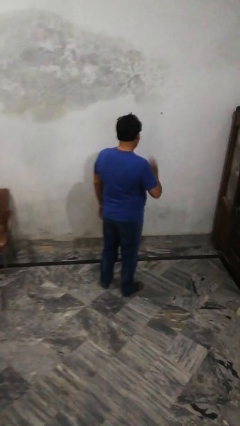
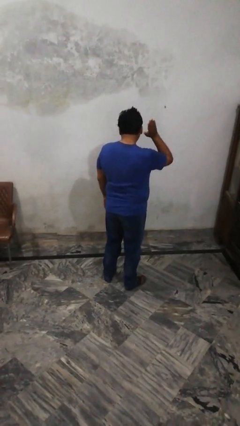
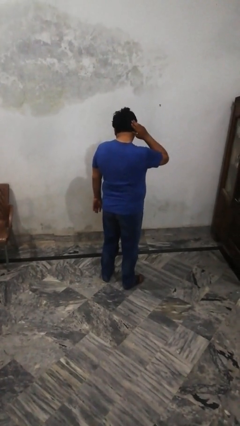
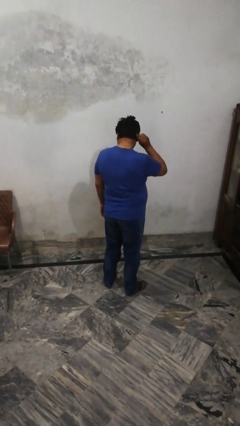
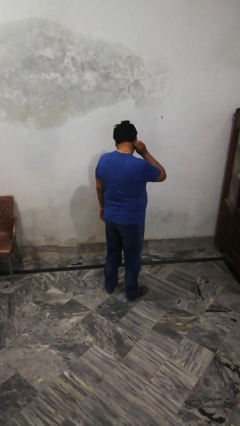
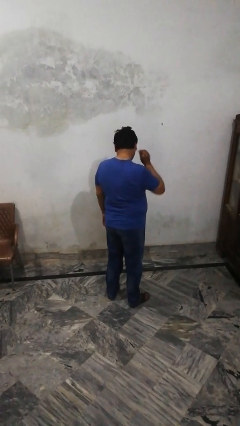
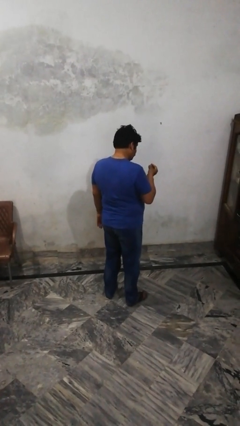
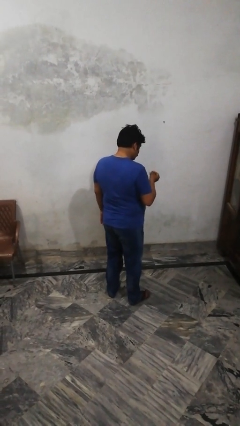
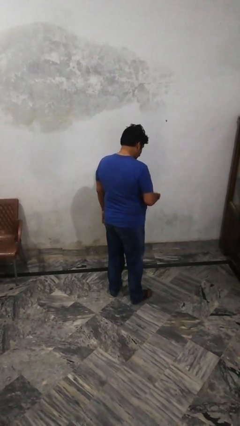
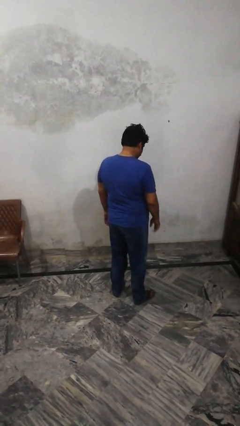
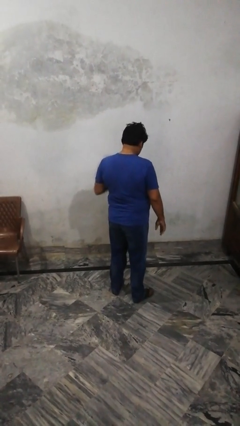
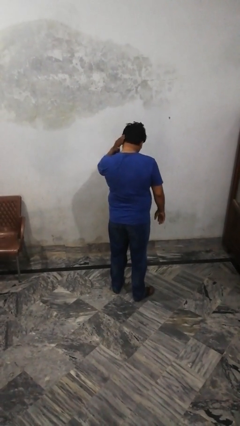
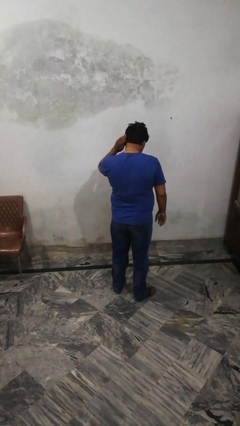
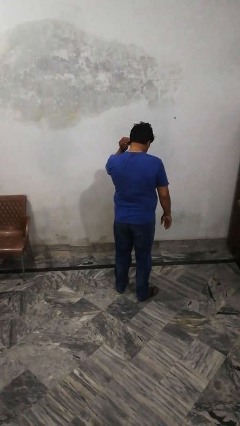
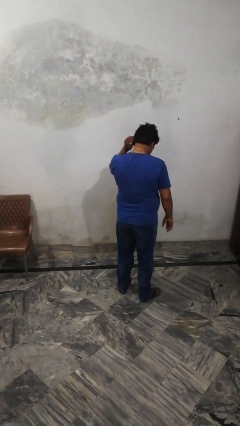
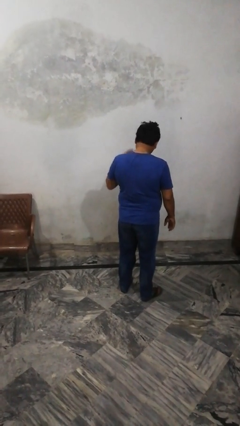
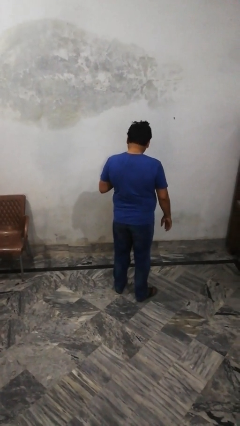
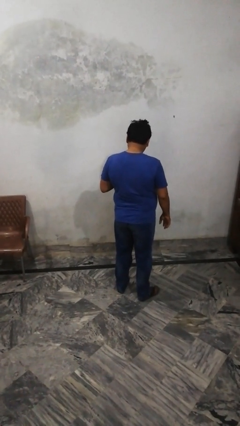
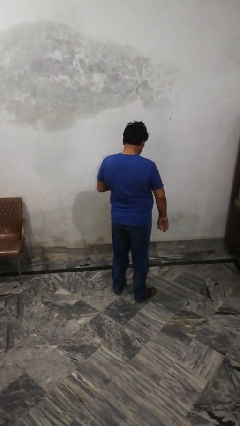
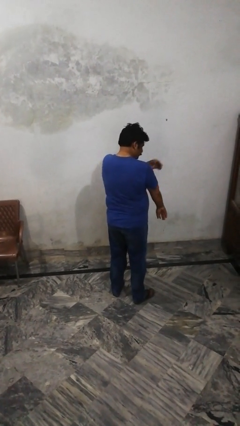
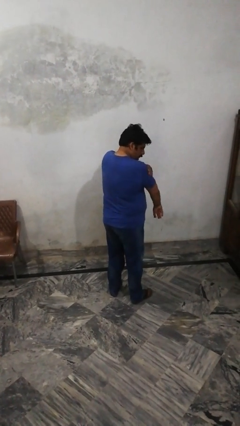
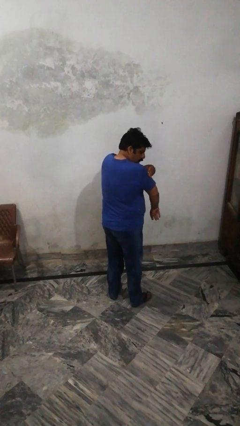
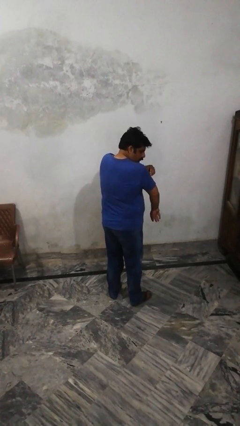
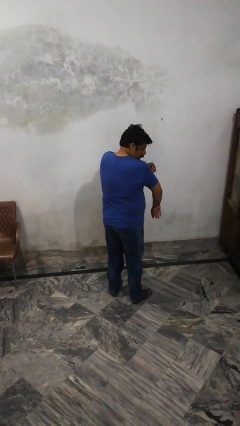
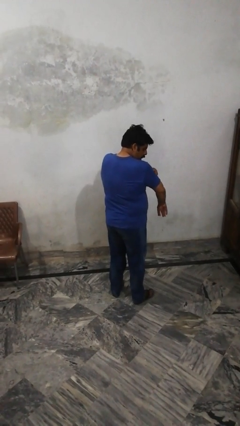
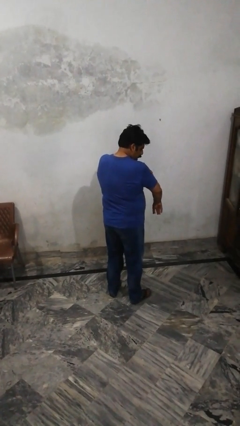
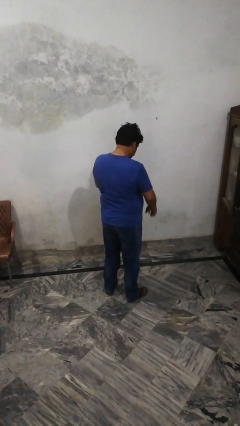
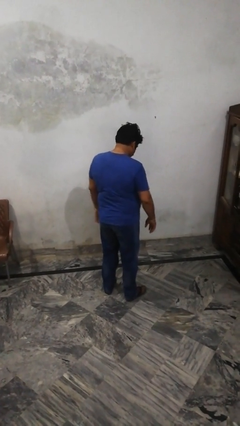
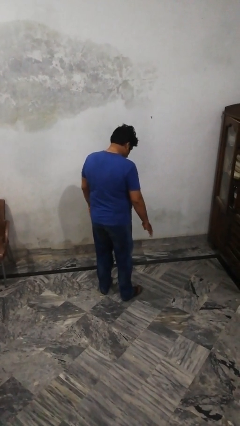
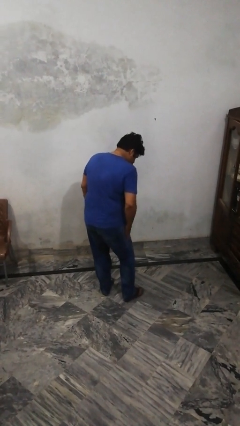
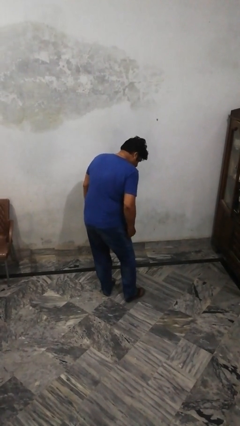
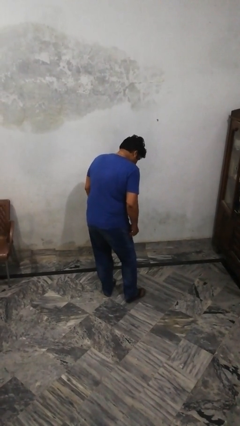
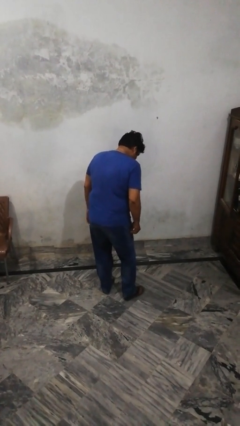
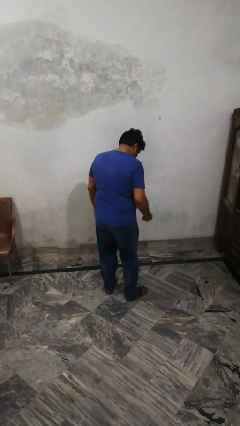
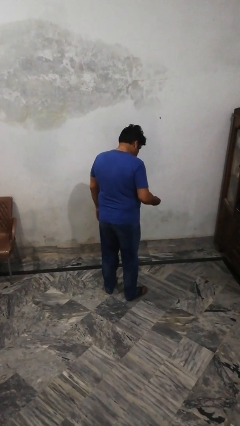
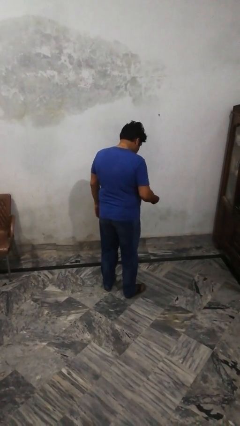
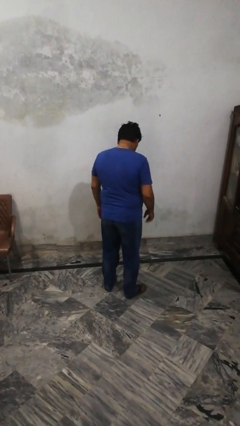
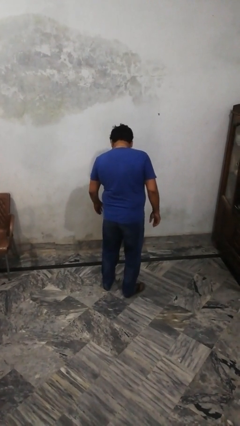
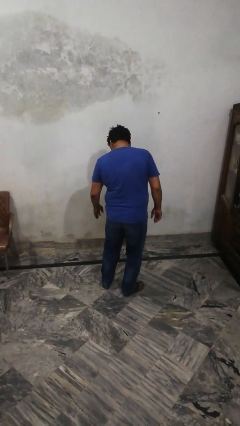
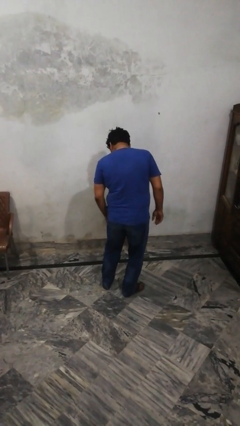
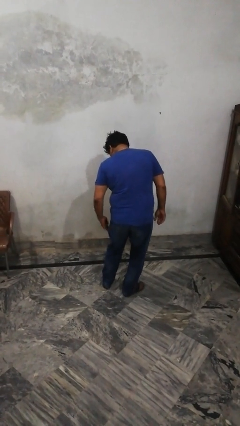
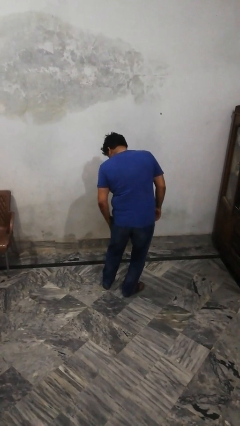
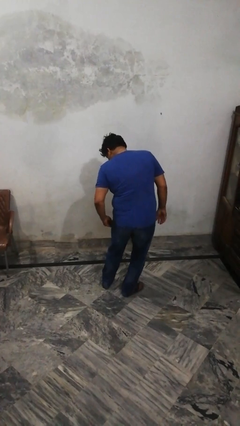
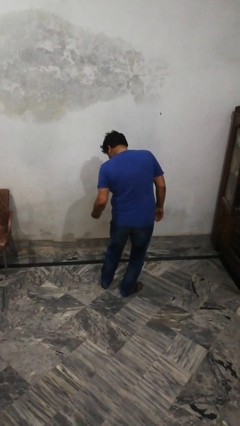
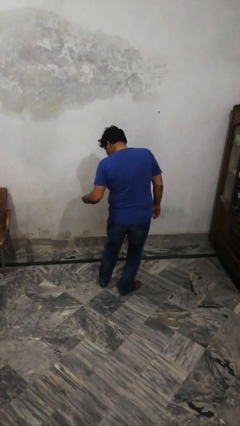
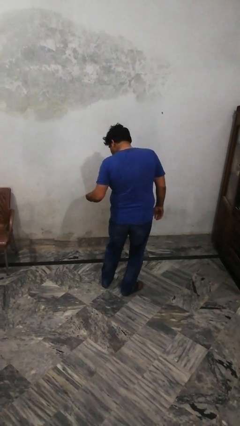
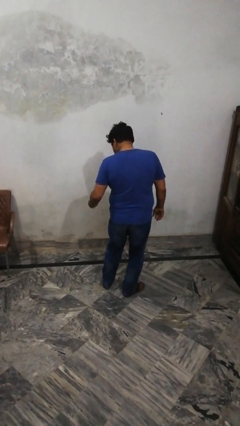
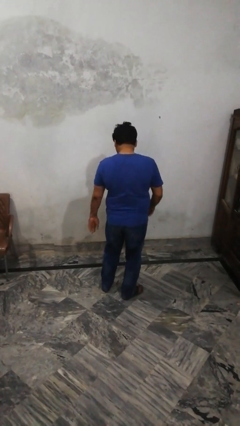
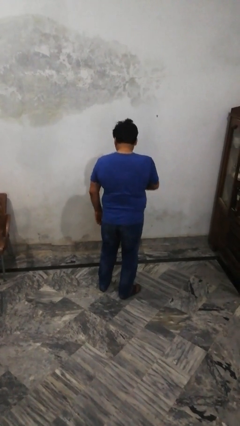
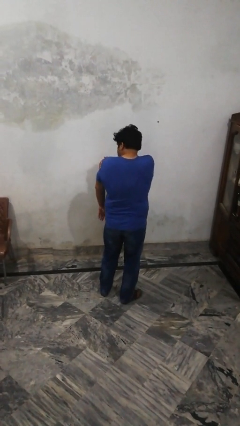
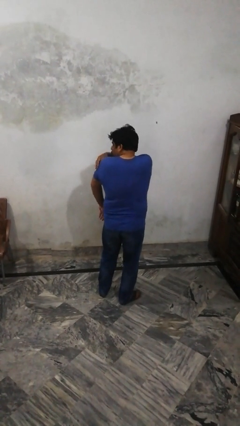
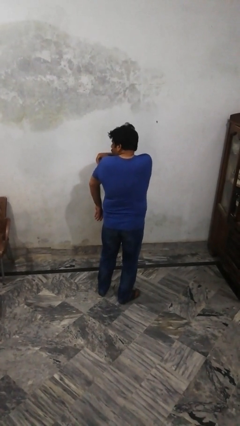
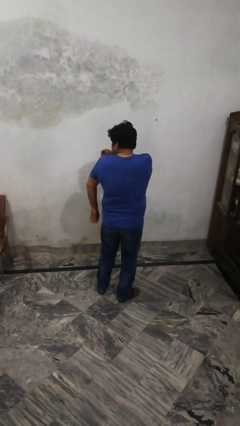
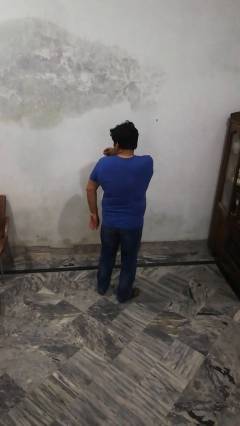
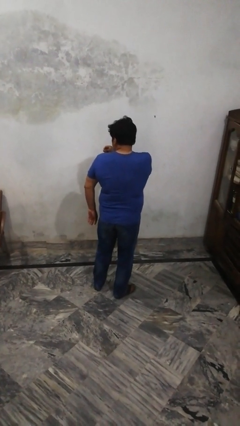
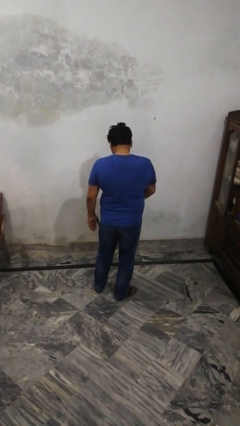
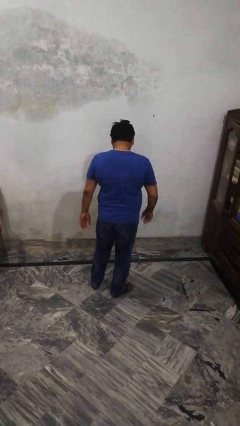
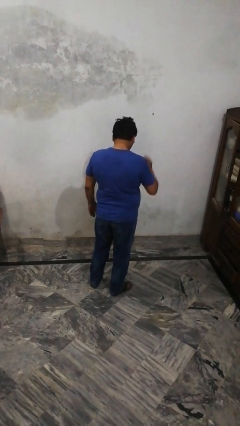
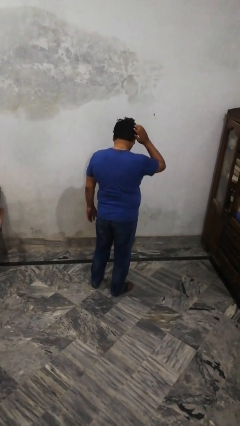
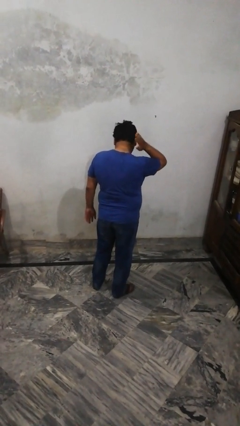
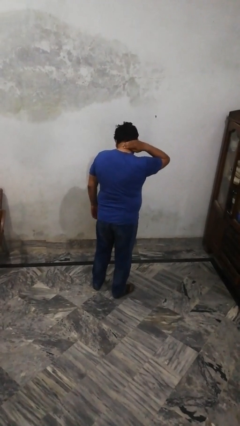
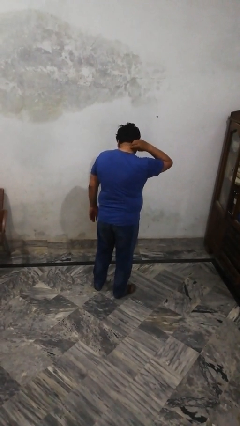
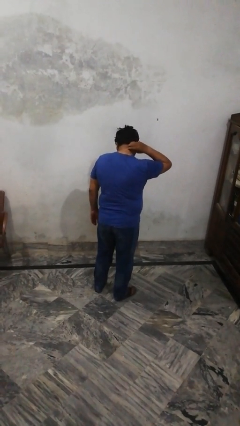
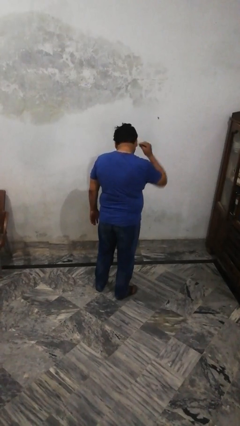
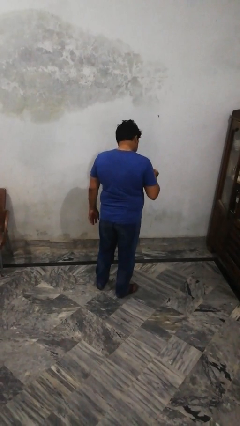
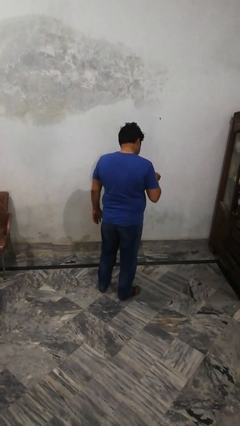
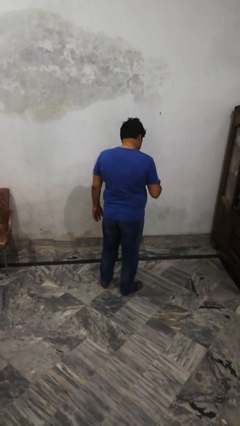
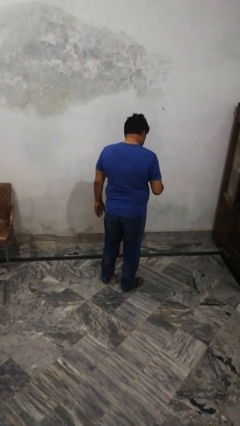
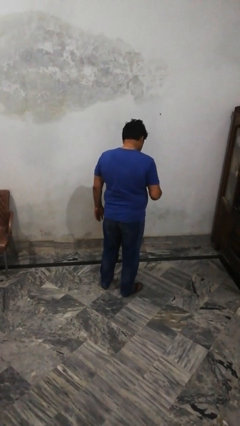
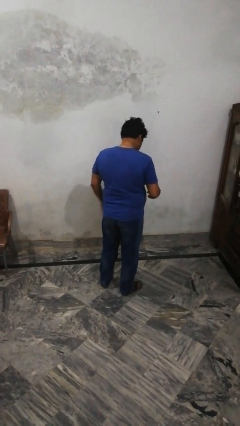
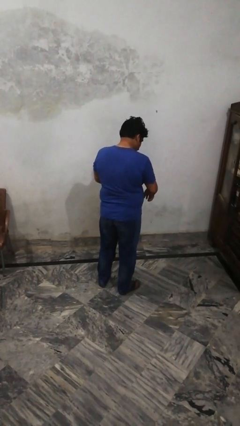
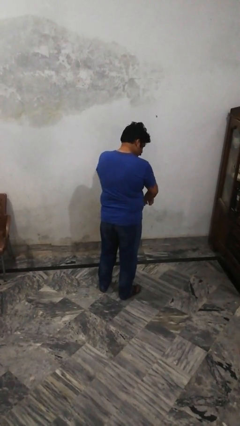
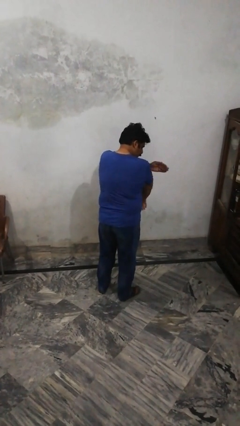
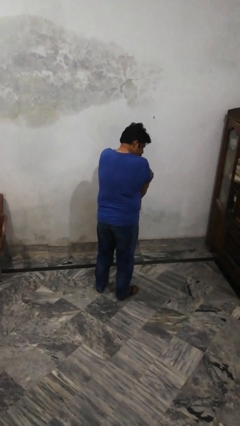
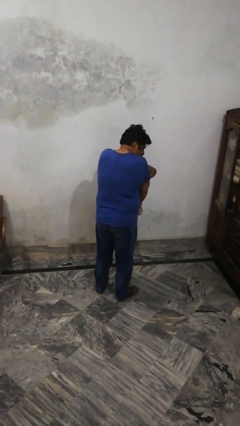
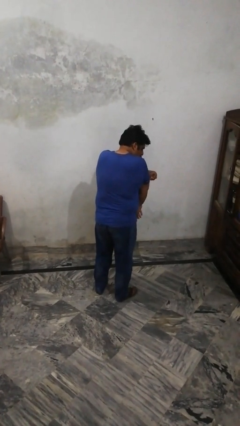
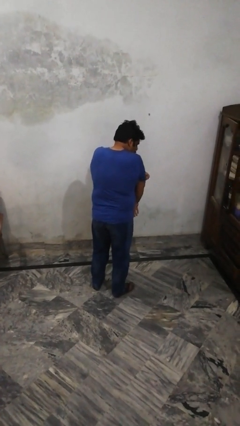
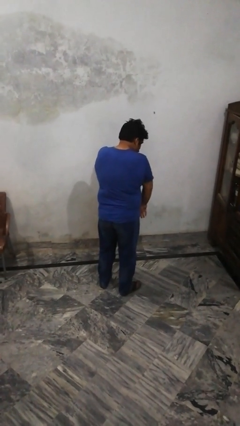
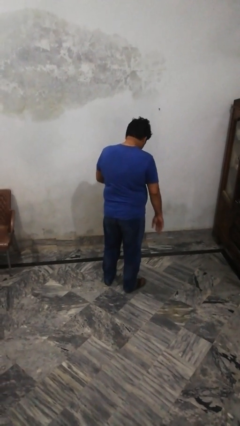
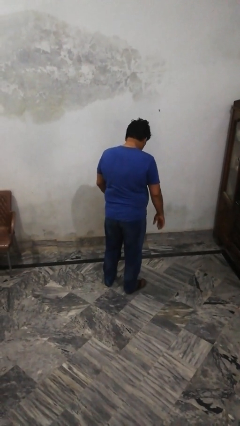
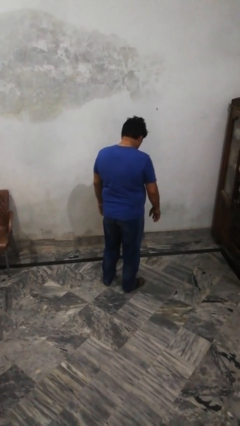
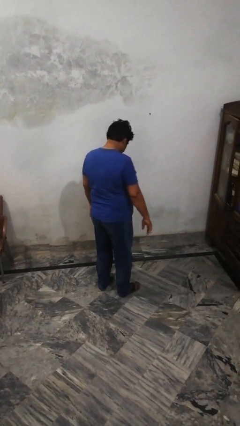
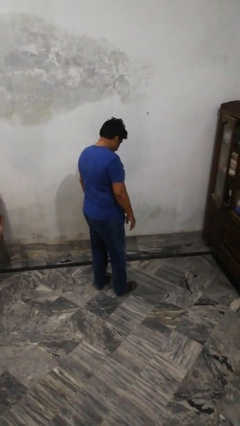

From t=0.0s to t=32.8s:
person swats bug

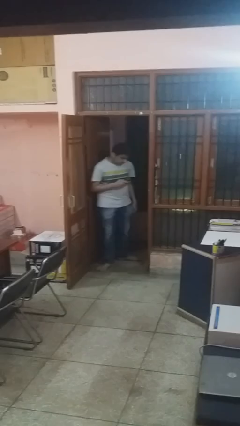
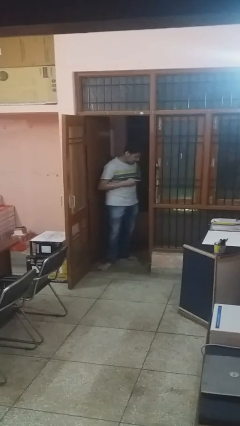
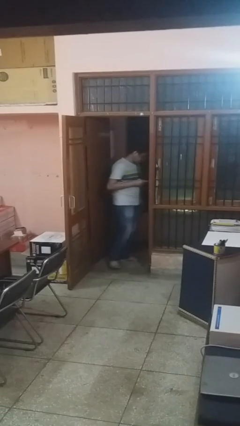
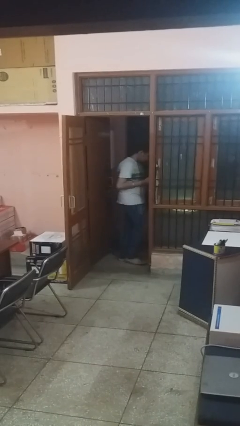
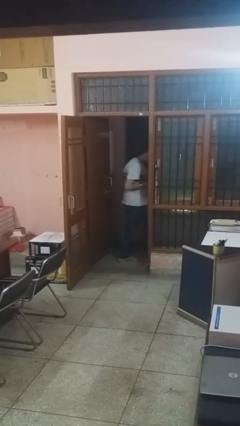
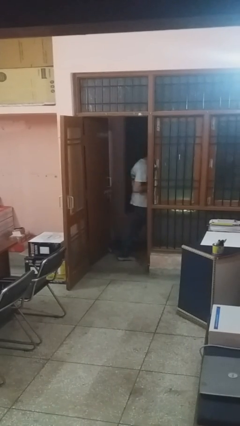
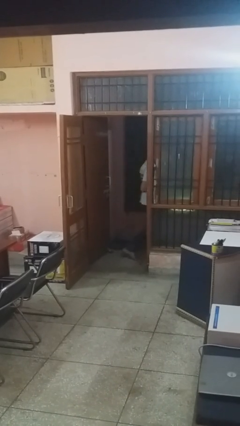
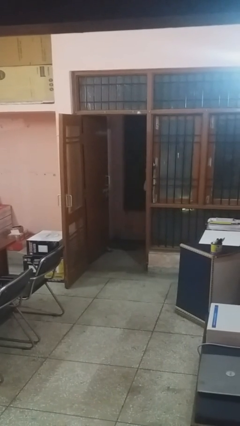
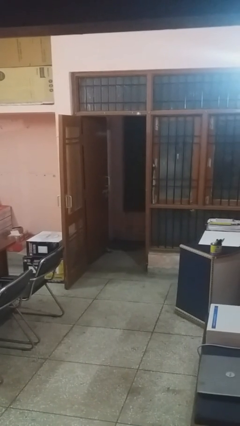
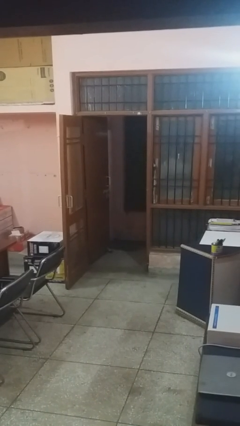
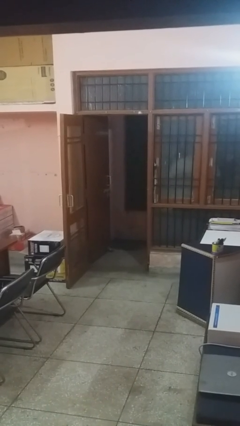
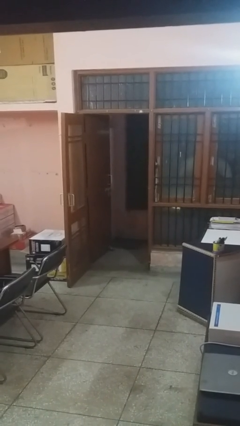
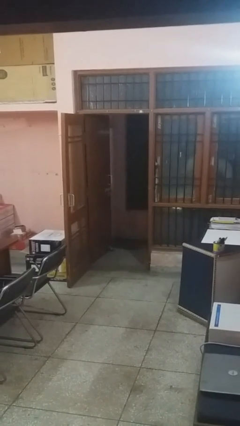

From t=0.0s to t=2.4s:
person exits scene through structure
